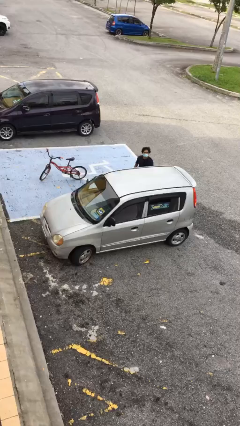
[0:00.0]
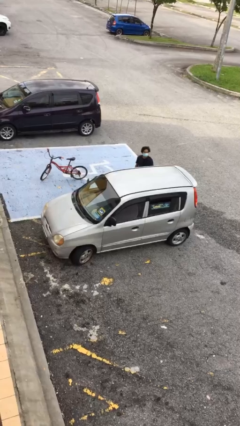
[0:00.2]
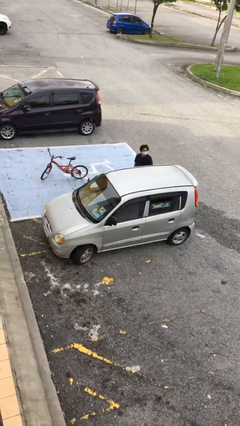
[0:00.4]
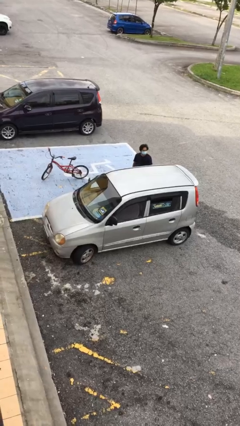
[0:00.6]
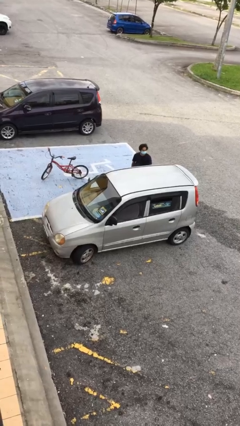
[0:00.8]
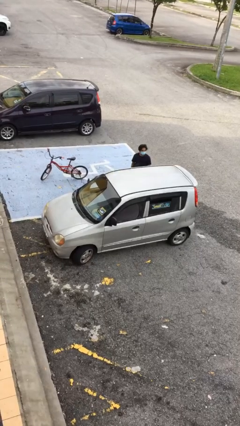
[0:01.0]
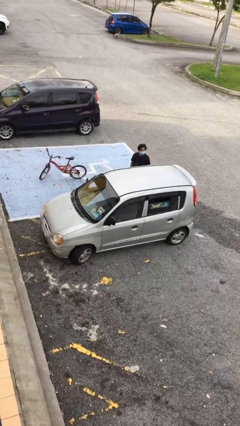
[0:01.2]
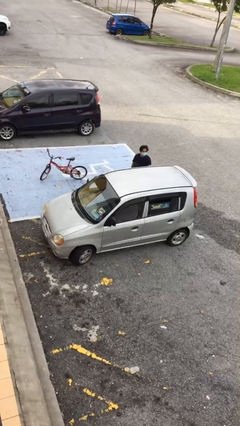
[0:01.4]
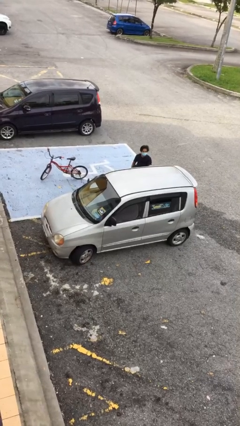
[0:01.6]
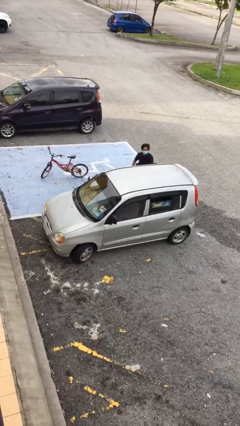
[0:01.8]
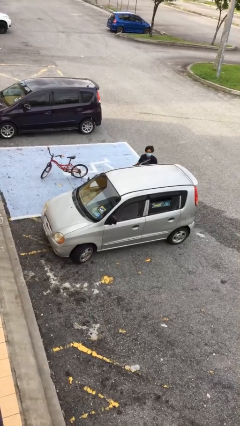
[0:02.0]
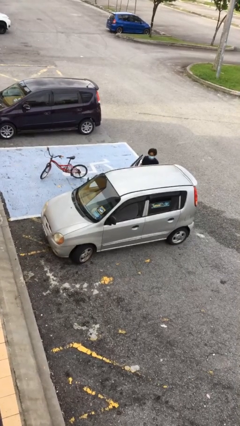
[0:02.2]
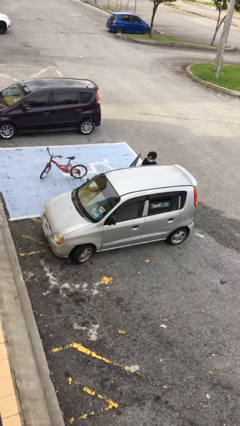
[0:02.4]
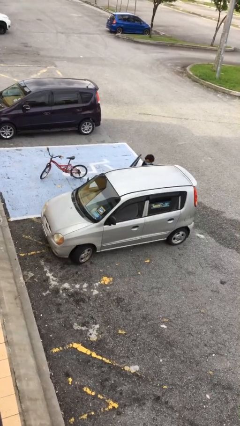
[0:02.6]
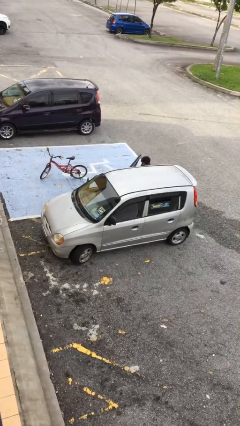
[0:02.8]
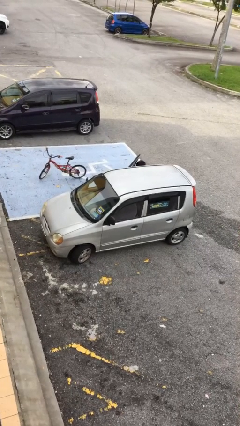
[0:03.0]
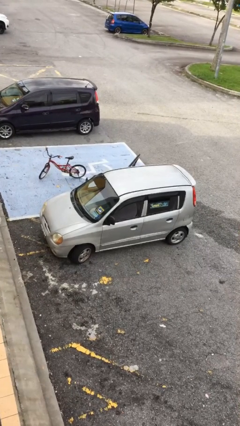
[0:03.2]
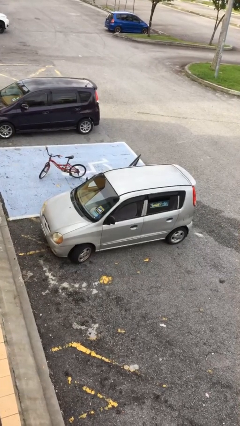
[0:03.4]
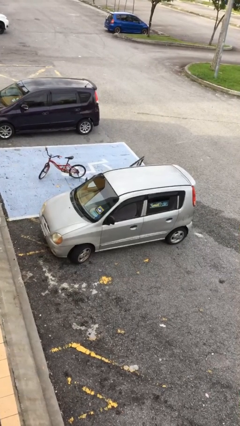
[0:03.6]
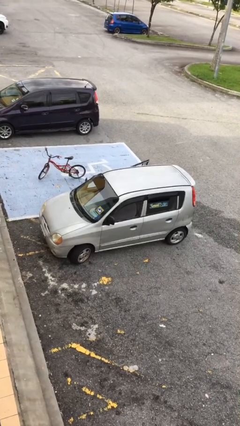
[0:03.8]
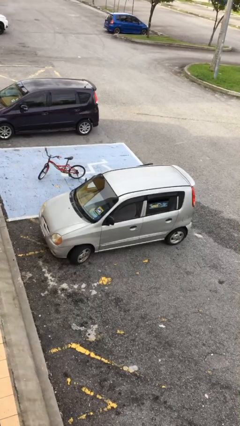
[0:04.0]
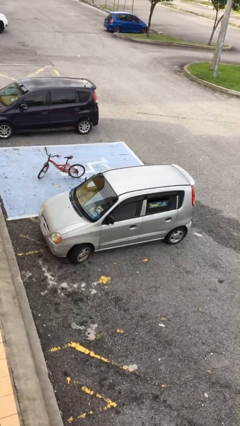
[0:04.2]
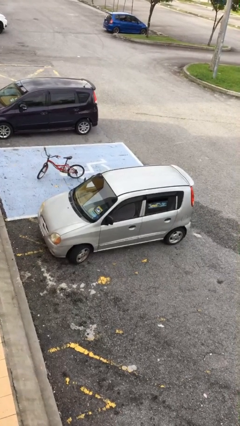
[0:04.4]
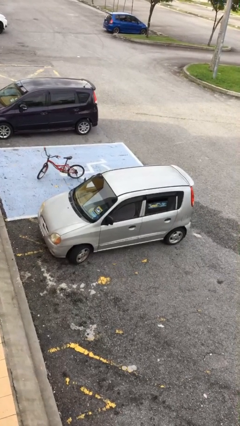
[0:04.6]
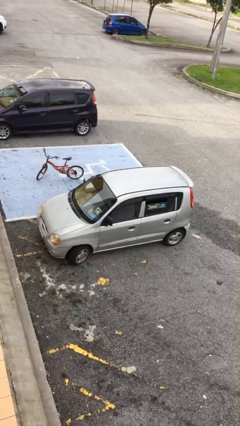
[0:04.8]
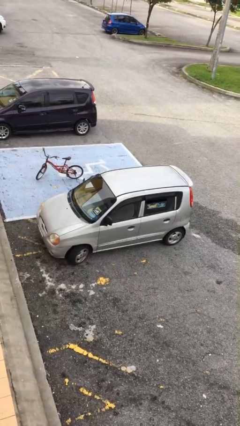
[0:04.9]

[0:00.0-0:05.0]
car picks up person

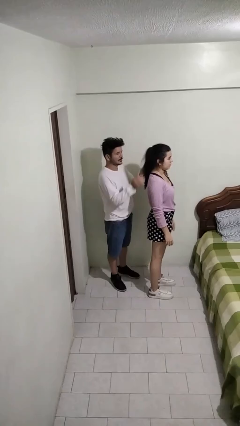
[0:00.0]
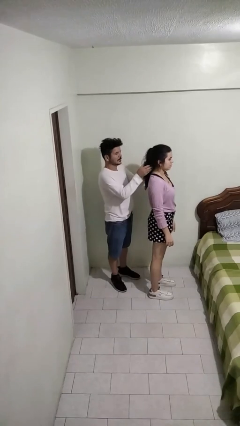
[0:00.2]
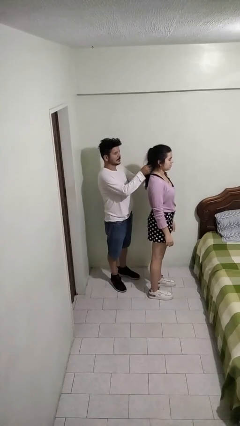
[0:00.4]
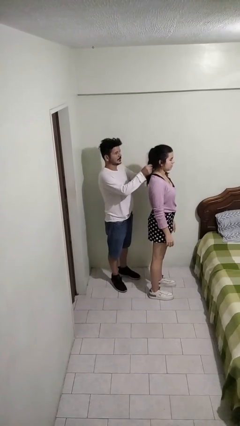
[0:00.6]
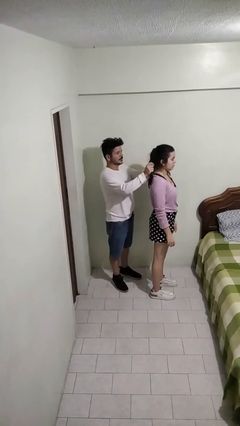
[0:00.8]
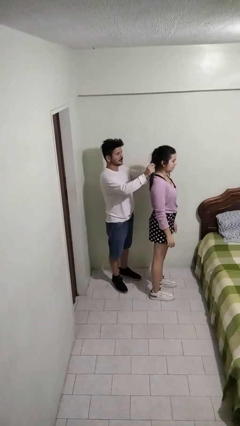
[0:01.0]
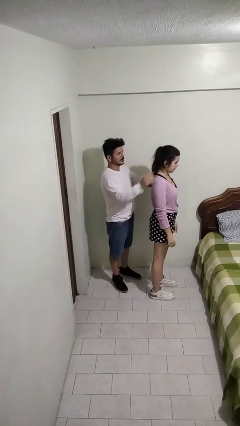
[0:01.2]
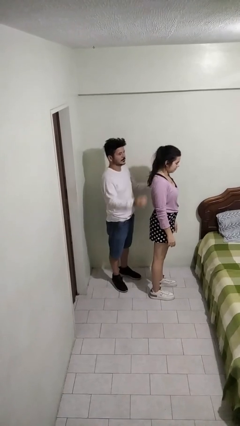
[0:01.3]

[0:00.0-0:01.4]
person grabs person by hair

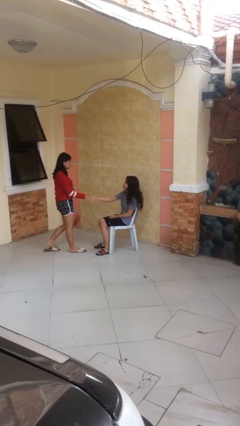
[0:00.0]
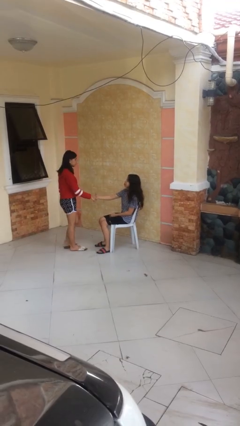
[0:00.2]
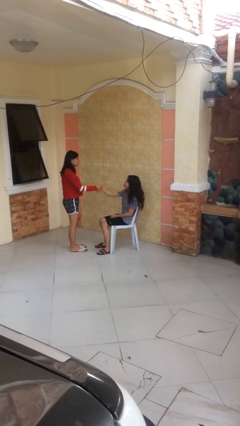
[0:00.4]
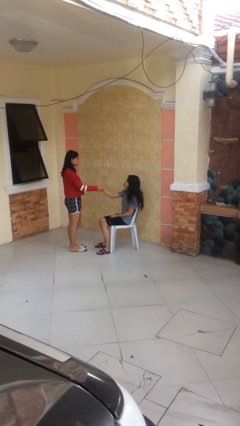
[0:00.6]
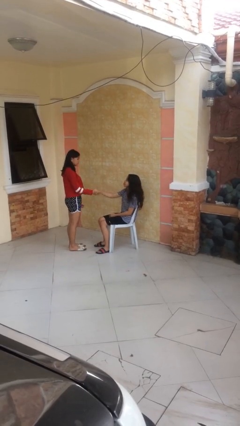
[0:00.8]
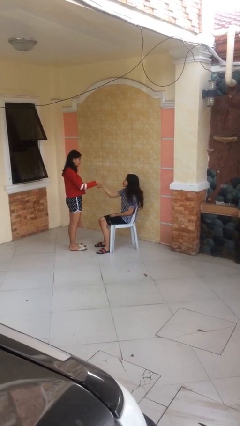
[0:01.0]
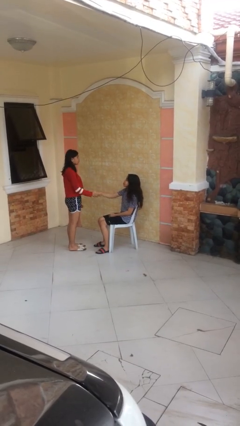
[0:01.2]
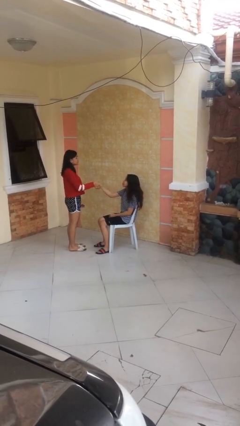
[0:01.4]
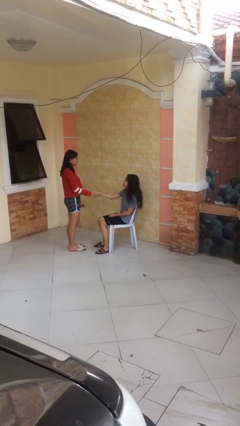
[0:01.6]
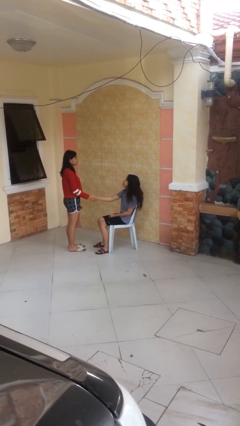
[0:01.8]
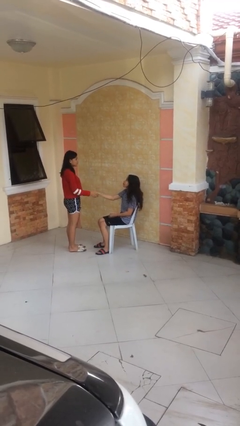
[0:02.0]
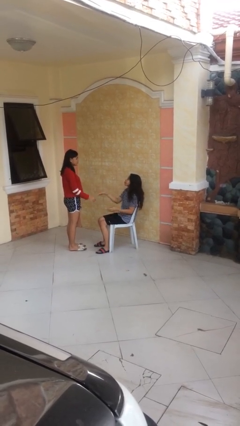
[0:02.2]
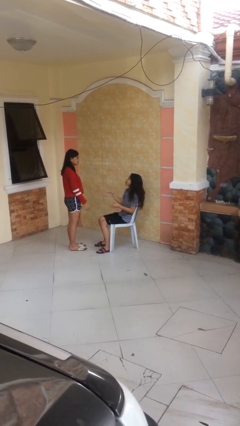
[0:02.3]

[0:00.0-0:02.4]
person shakes hand

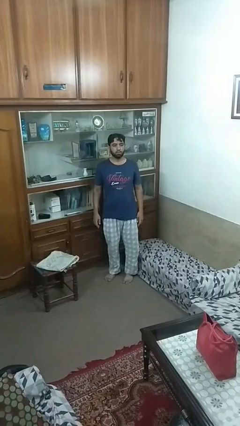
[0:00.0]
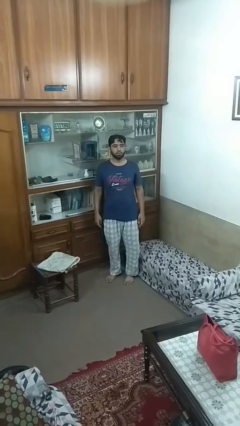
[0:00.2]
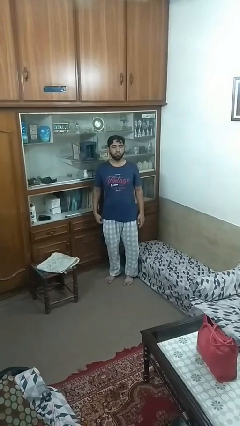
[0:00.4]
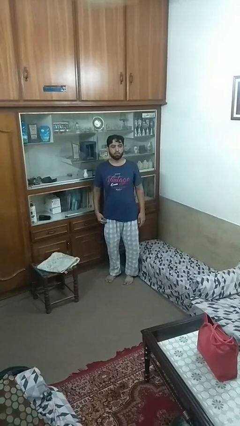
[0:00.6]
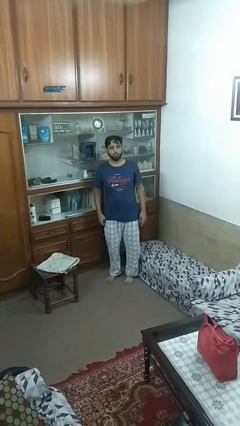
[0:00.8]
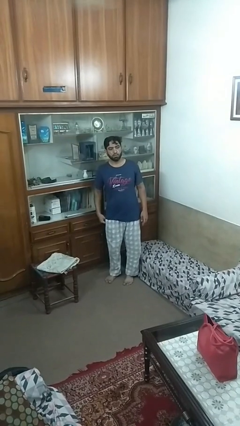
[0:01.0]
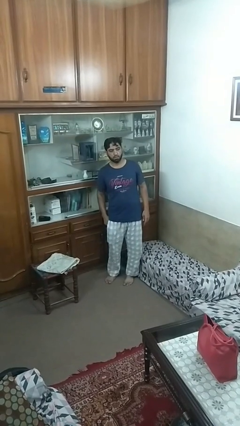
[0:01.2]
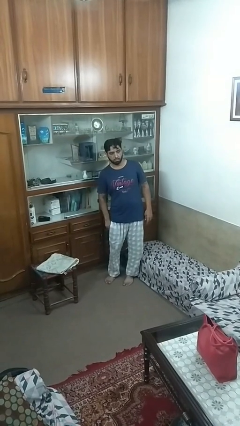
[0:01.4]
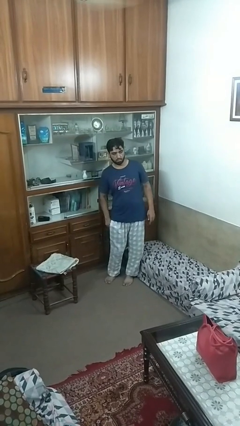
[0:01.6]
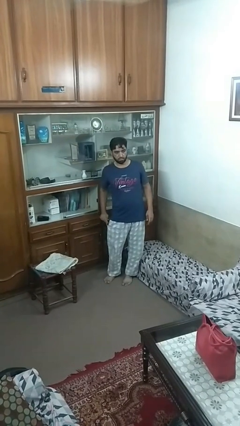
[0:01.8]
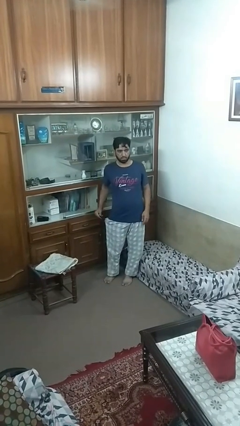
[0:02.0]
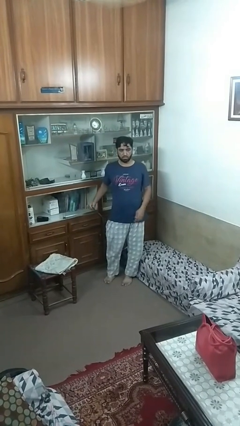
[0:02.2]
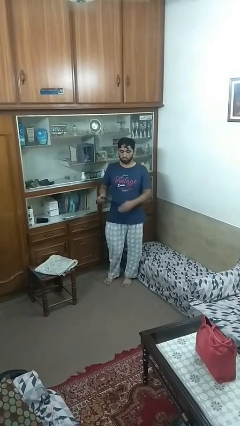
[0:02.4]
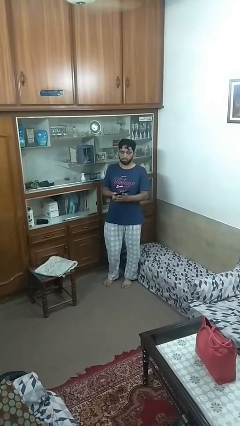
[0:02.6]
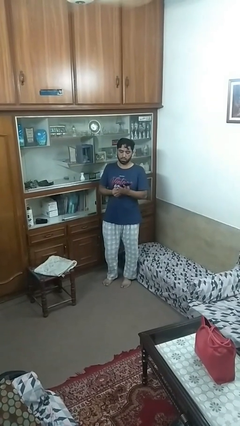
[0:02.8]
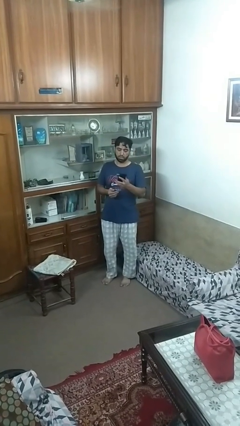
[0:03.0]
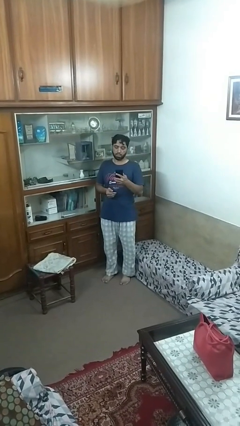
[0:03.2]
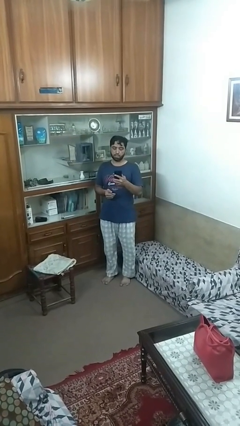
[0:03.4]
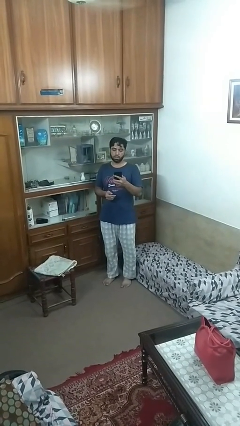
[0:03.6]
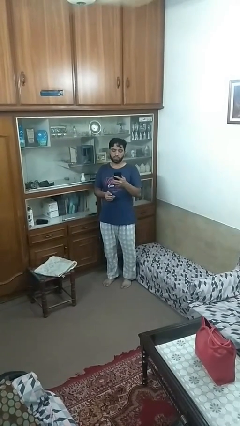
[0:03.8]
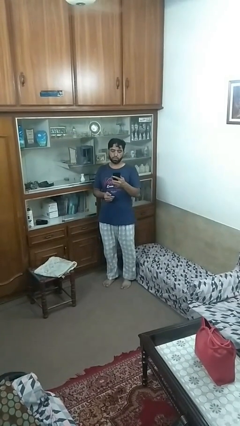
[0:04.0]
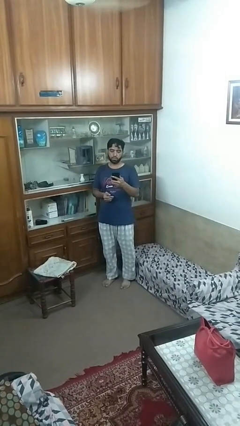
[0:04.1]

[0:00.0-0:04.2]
person takes phone from pocket

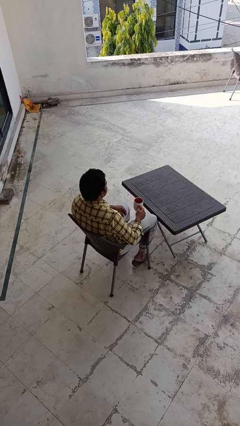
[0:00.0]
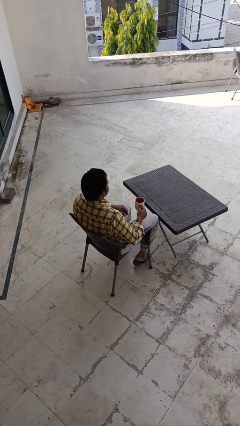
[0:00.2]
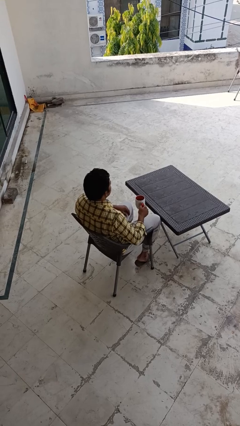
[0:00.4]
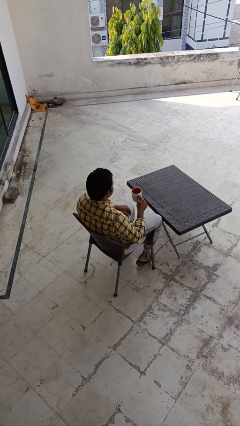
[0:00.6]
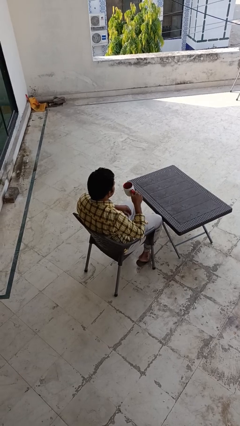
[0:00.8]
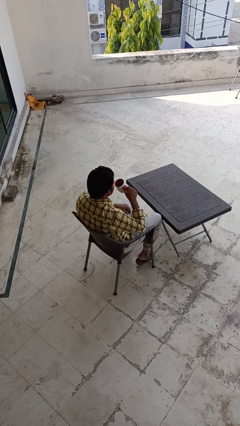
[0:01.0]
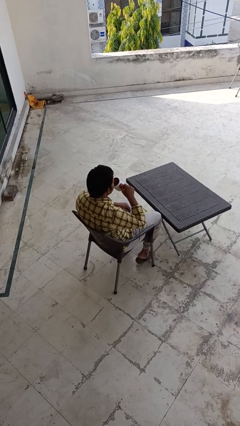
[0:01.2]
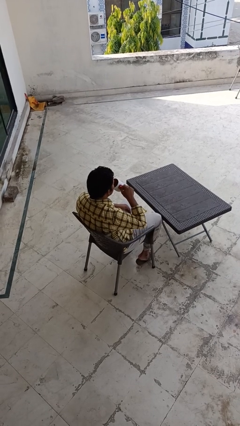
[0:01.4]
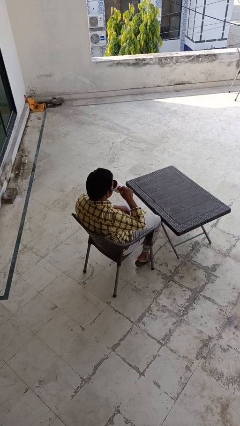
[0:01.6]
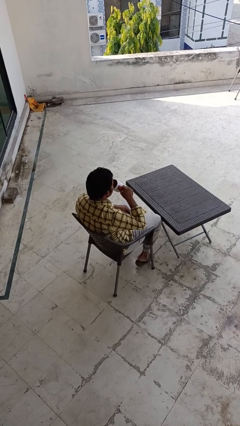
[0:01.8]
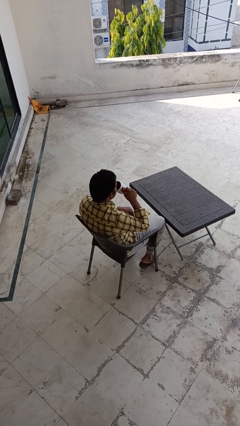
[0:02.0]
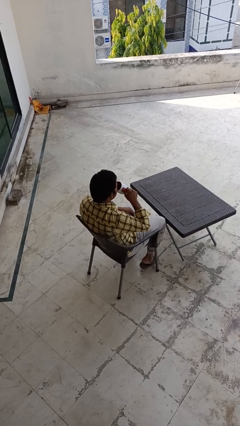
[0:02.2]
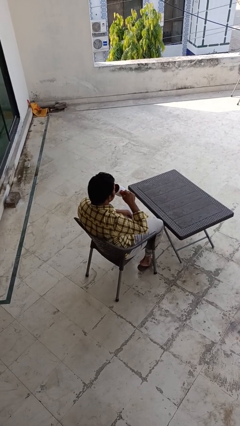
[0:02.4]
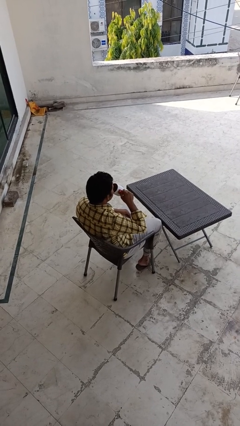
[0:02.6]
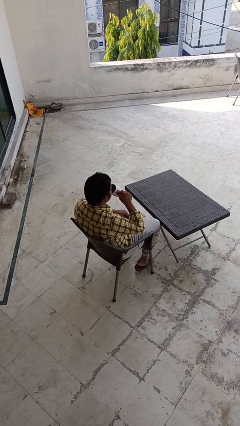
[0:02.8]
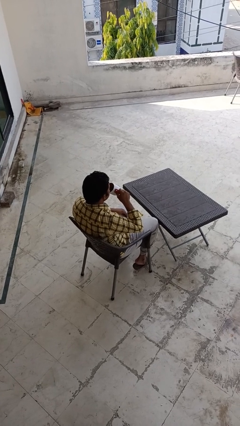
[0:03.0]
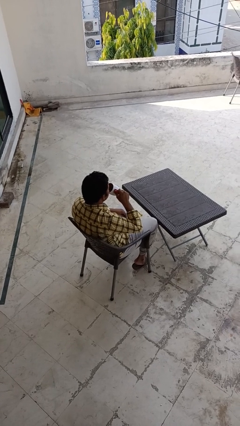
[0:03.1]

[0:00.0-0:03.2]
person drinks from mug

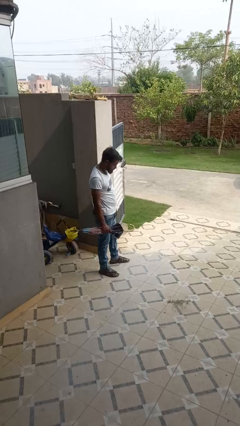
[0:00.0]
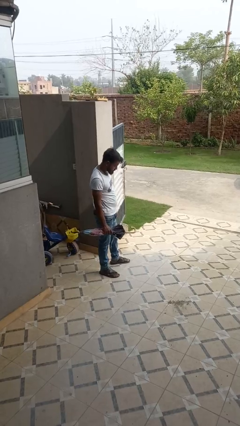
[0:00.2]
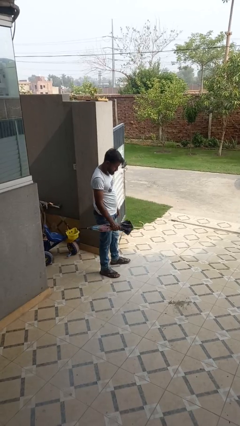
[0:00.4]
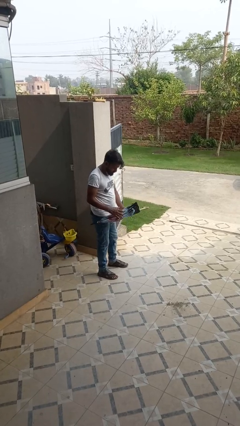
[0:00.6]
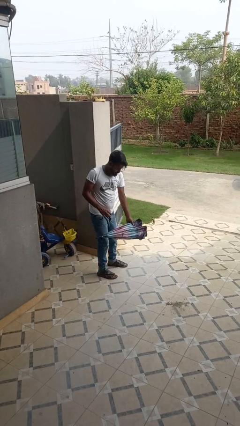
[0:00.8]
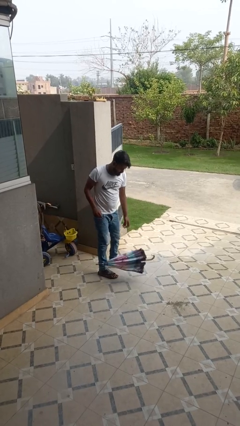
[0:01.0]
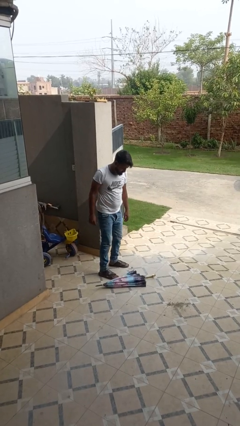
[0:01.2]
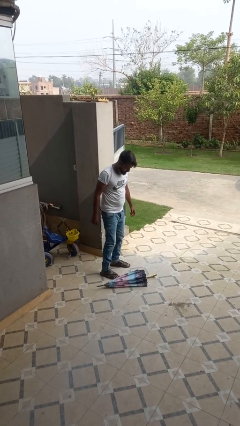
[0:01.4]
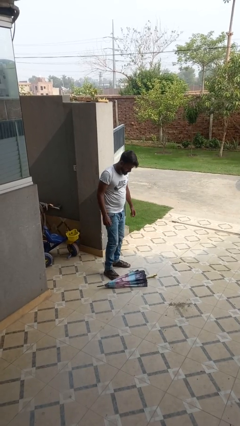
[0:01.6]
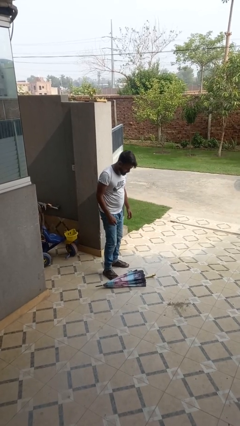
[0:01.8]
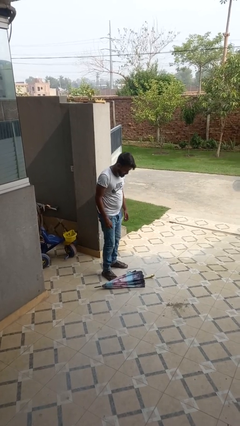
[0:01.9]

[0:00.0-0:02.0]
person drops object
